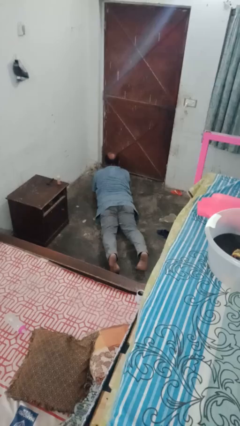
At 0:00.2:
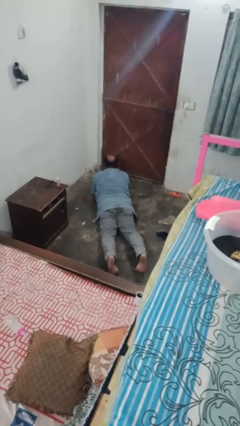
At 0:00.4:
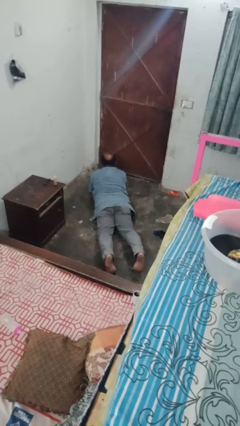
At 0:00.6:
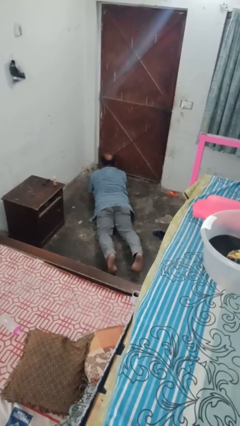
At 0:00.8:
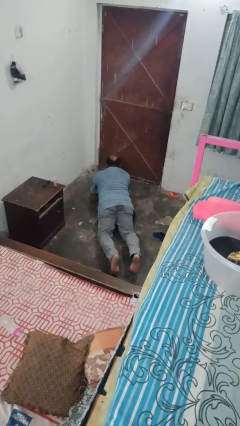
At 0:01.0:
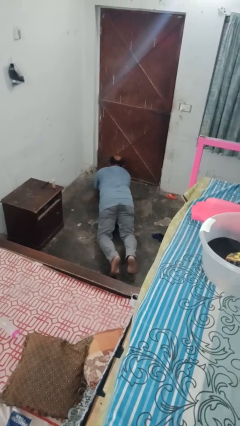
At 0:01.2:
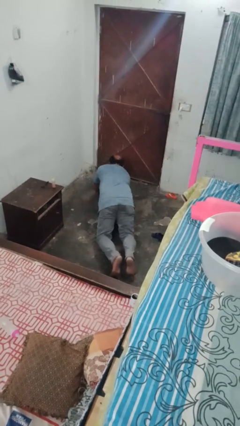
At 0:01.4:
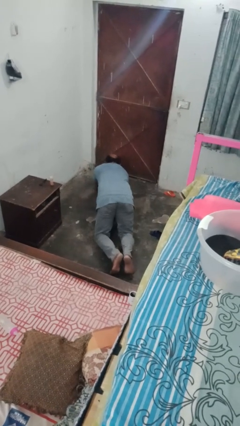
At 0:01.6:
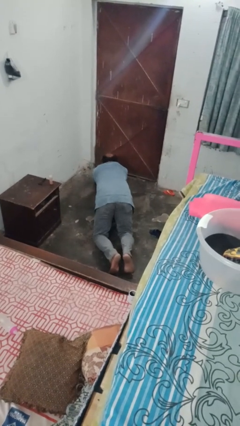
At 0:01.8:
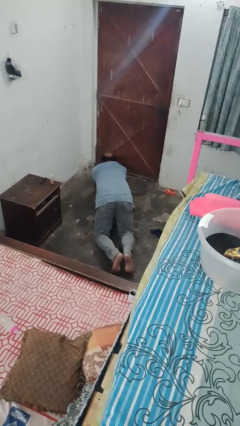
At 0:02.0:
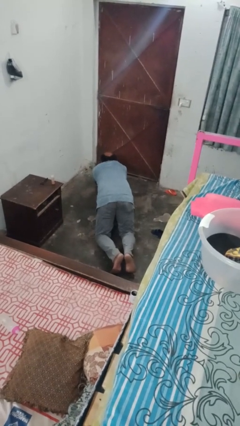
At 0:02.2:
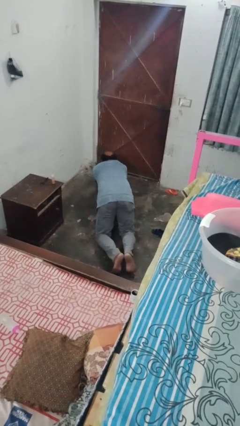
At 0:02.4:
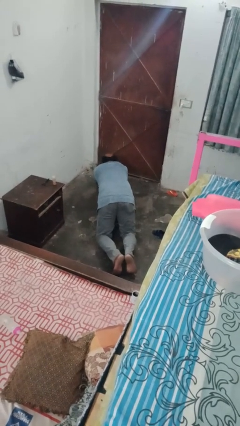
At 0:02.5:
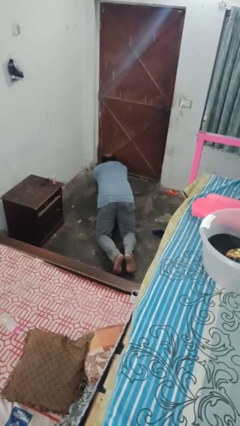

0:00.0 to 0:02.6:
person exercises with plank

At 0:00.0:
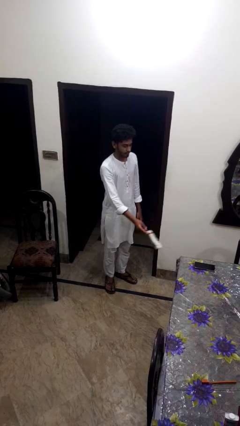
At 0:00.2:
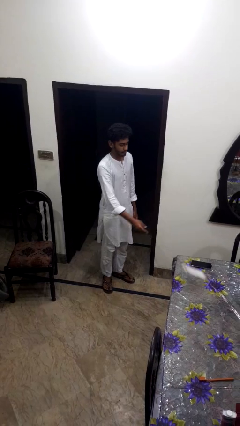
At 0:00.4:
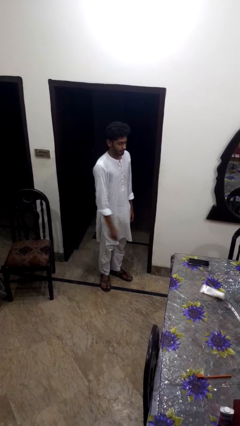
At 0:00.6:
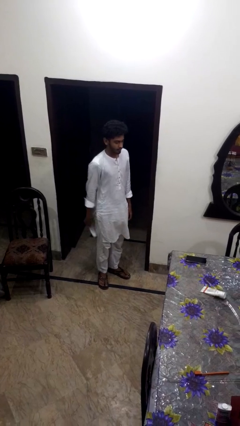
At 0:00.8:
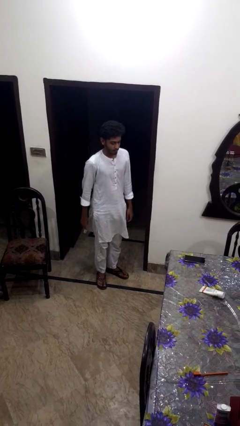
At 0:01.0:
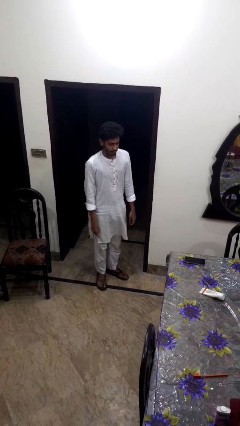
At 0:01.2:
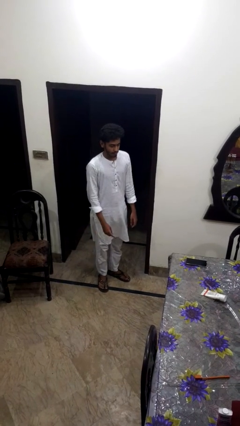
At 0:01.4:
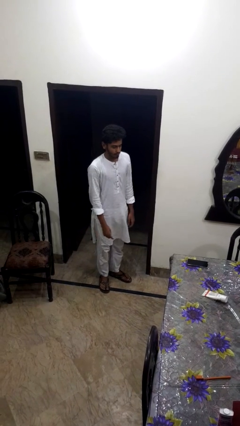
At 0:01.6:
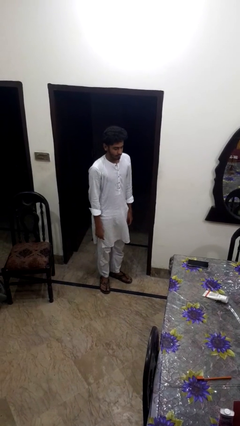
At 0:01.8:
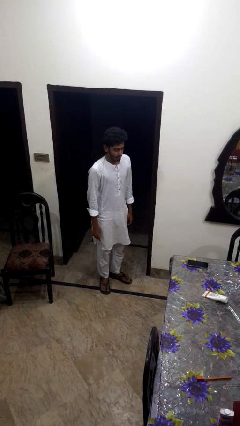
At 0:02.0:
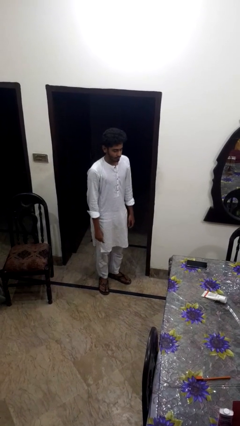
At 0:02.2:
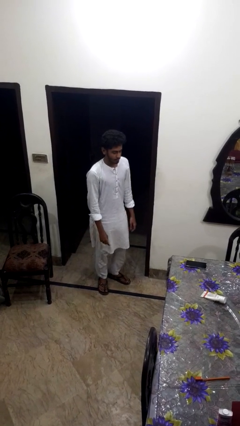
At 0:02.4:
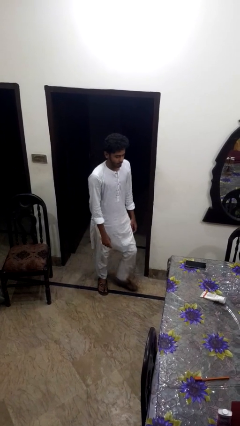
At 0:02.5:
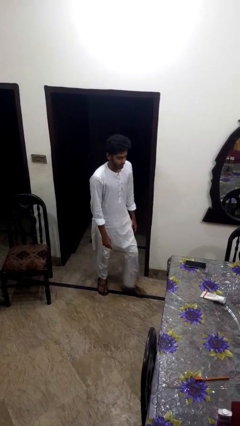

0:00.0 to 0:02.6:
person throws object on table

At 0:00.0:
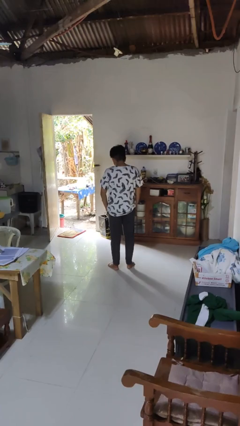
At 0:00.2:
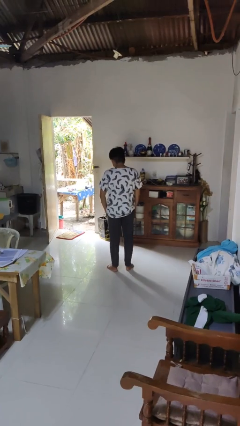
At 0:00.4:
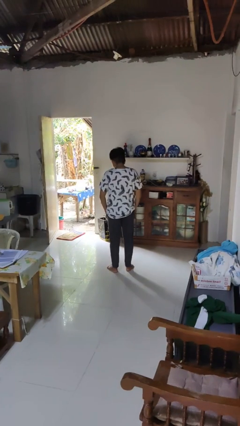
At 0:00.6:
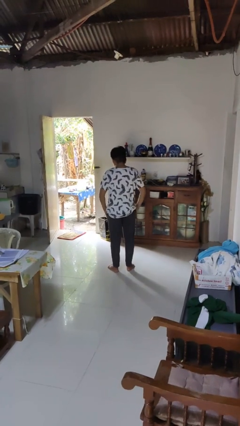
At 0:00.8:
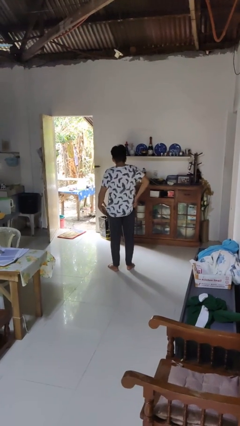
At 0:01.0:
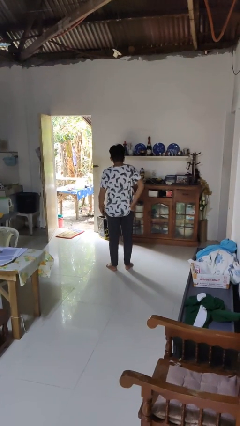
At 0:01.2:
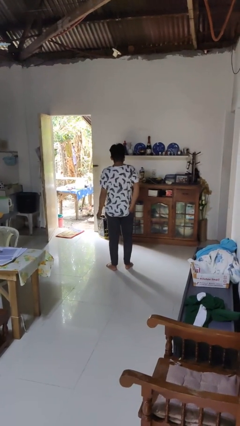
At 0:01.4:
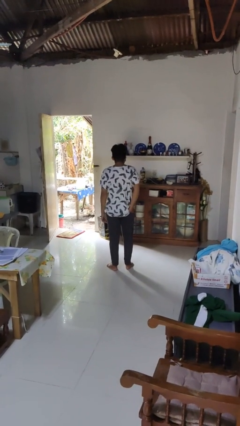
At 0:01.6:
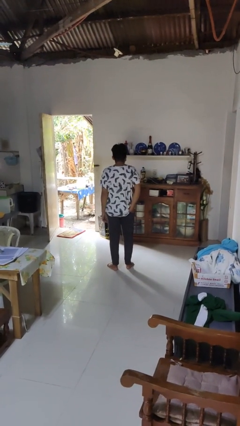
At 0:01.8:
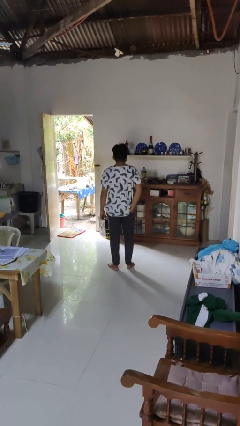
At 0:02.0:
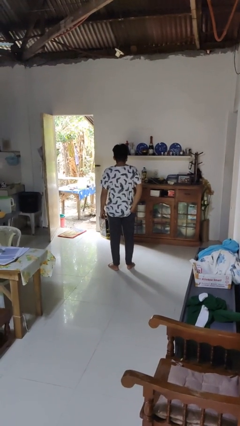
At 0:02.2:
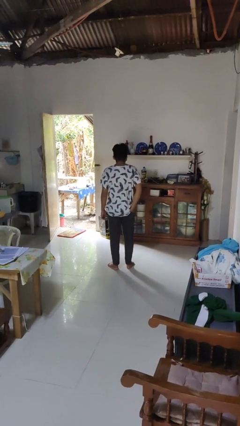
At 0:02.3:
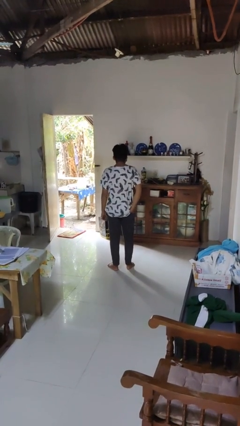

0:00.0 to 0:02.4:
person puts hands in back pockets

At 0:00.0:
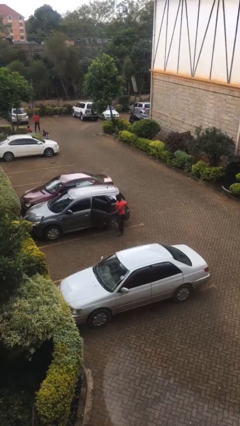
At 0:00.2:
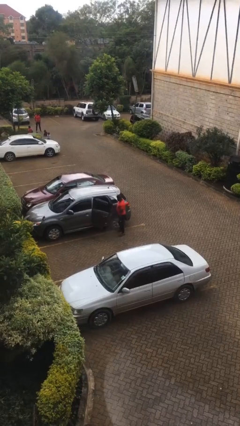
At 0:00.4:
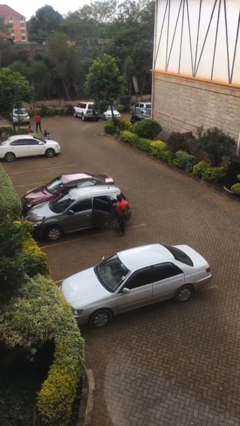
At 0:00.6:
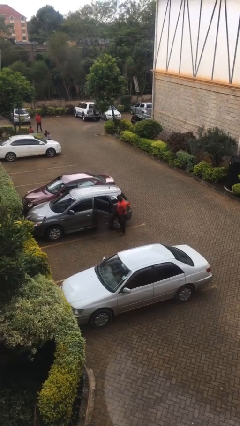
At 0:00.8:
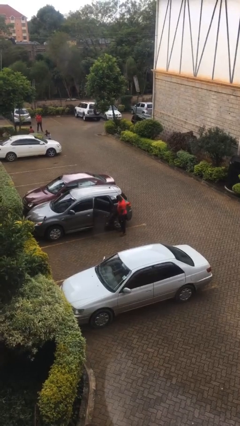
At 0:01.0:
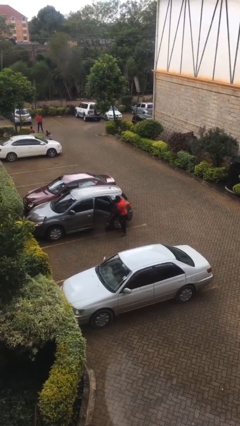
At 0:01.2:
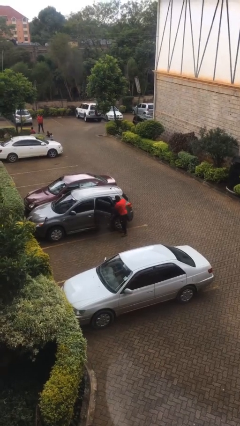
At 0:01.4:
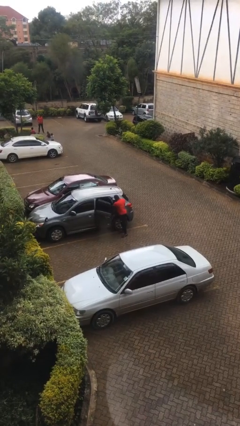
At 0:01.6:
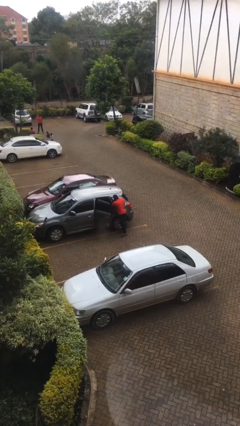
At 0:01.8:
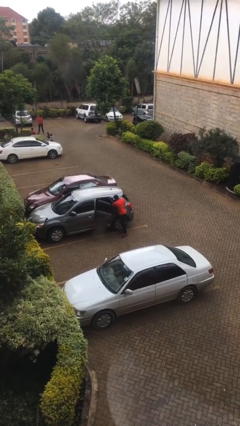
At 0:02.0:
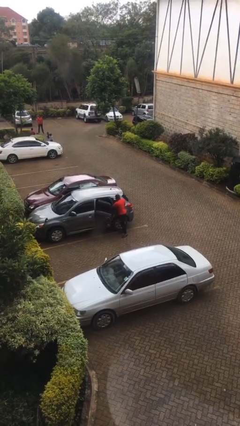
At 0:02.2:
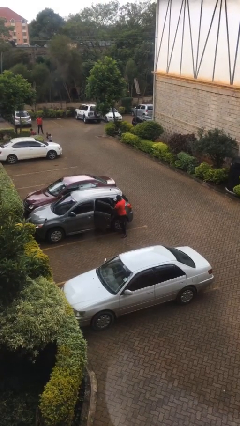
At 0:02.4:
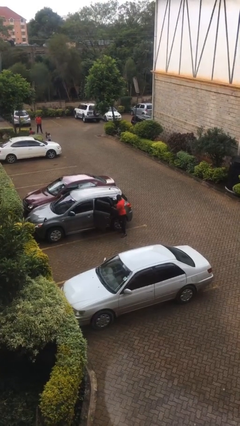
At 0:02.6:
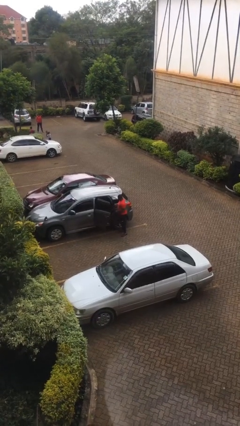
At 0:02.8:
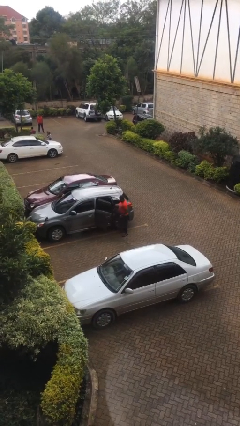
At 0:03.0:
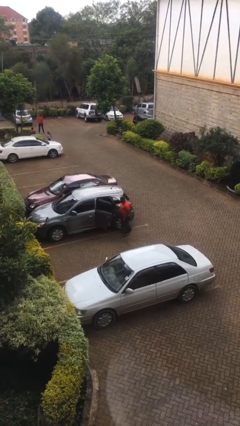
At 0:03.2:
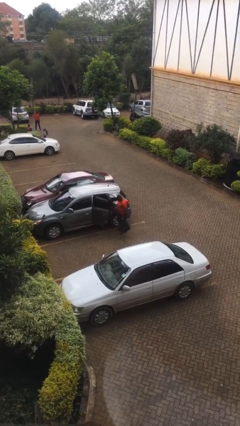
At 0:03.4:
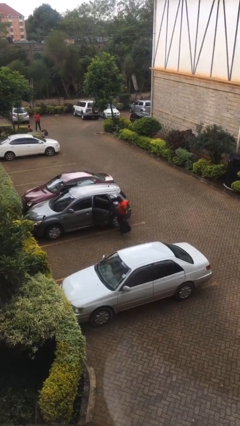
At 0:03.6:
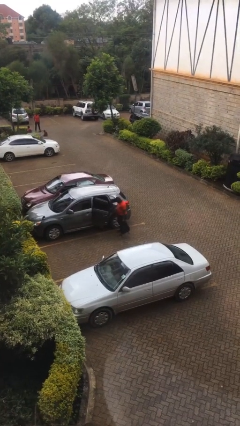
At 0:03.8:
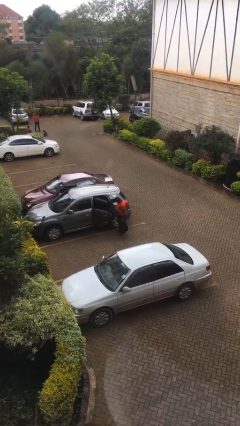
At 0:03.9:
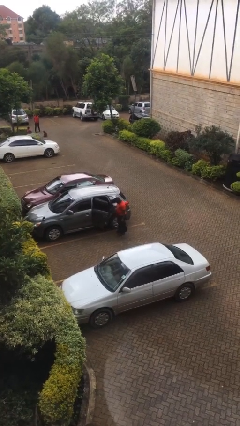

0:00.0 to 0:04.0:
person unloads car

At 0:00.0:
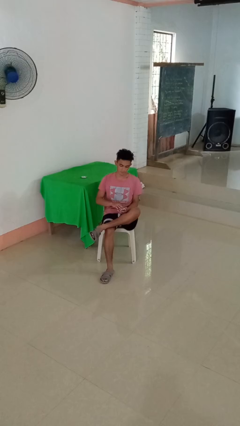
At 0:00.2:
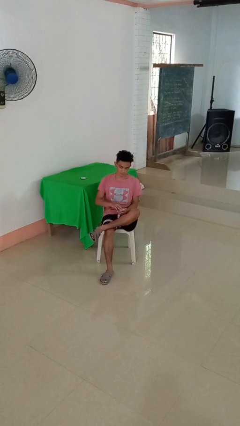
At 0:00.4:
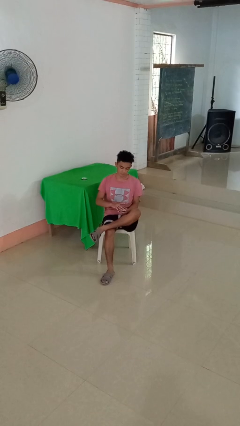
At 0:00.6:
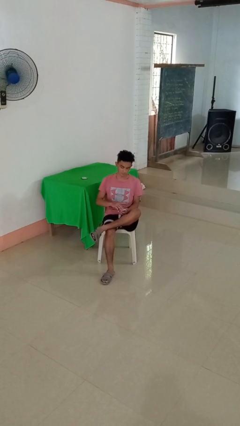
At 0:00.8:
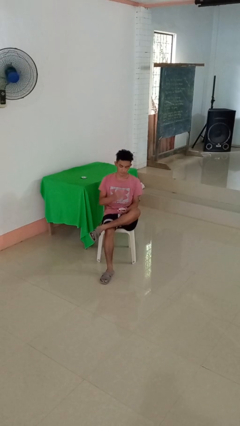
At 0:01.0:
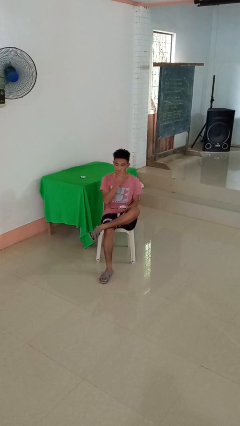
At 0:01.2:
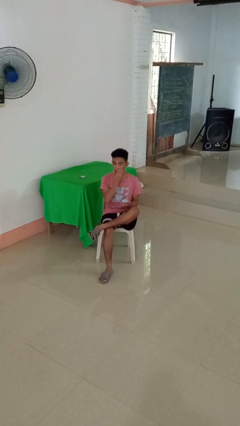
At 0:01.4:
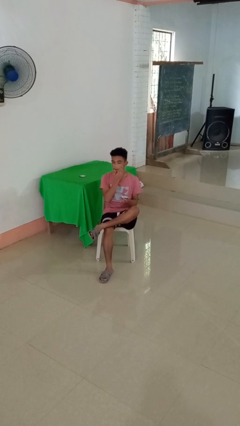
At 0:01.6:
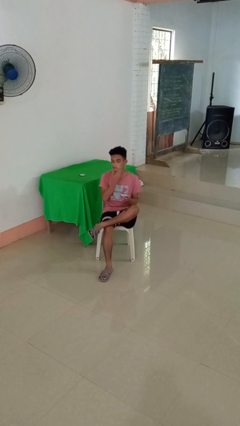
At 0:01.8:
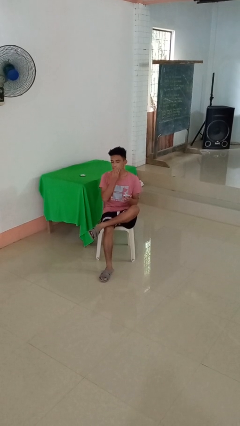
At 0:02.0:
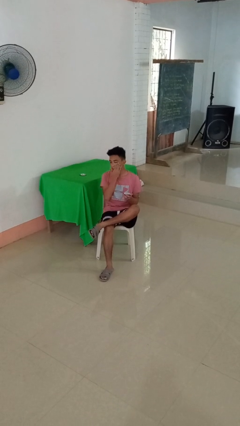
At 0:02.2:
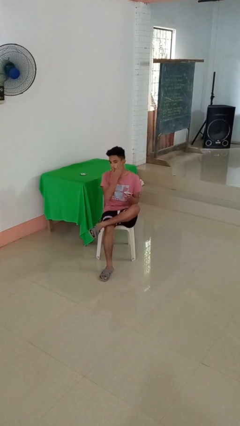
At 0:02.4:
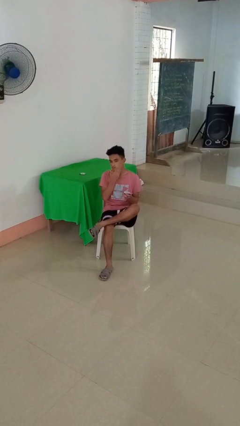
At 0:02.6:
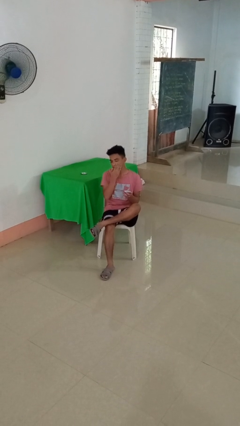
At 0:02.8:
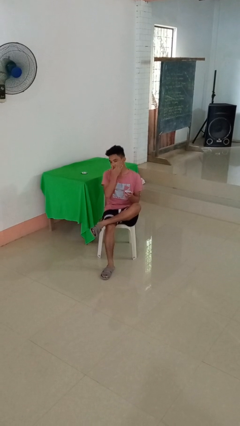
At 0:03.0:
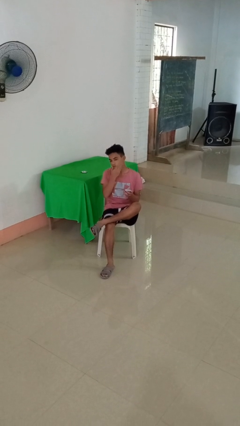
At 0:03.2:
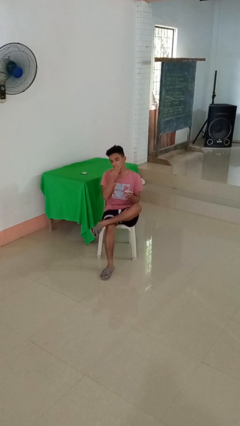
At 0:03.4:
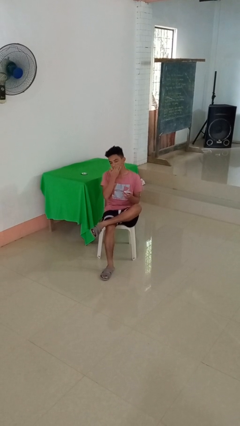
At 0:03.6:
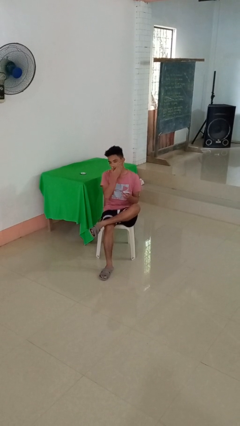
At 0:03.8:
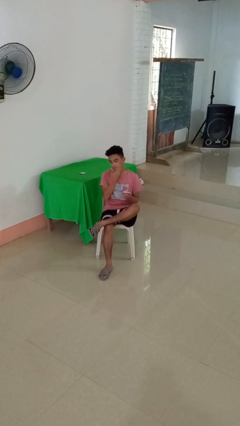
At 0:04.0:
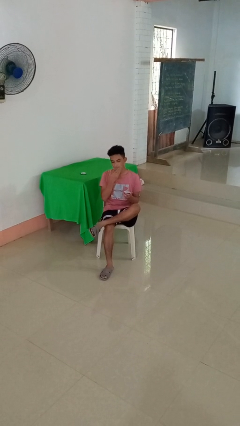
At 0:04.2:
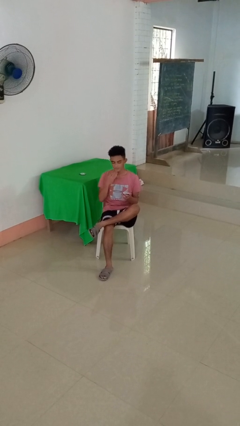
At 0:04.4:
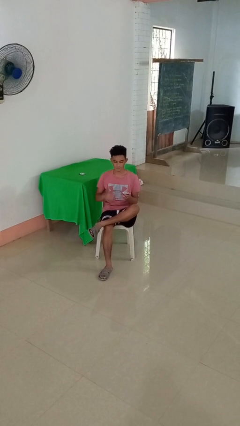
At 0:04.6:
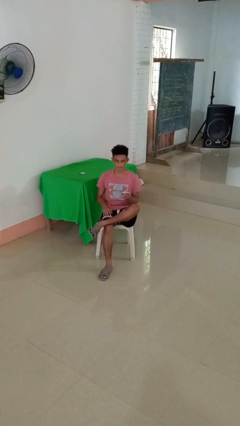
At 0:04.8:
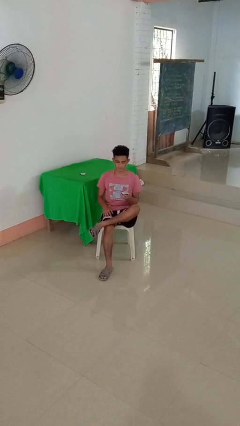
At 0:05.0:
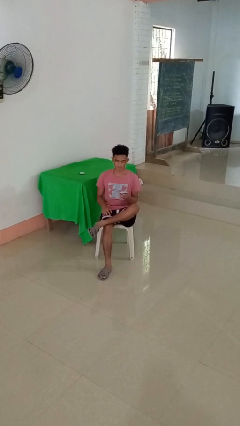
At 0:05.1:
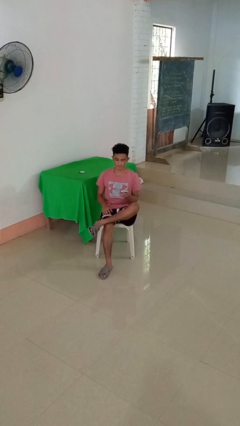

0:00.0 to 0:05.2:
person applies facial moisturizer

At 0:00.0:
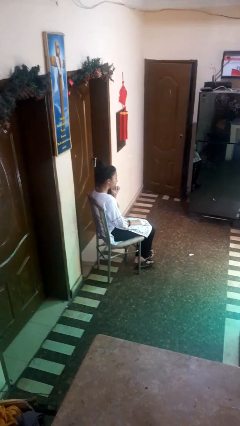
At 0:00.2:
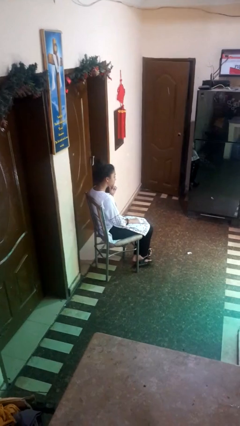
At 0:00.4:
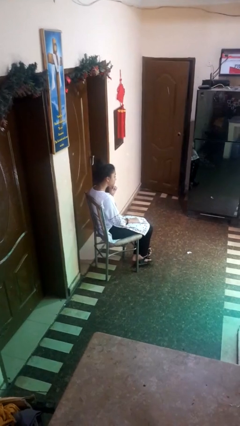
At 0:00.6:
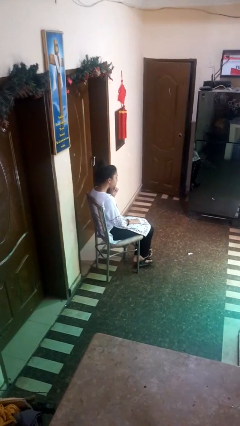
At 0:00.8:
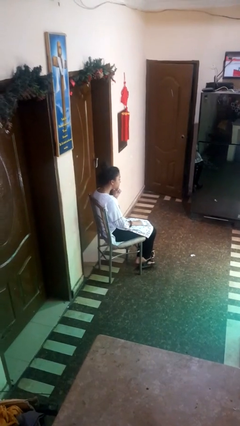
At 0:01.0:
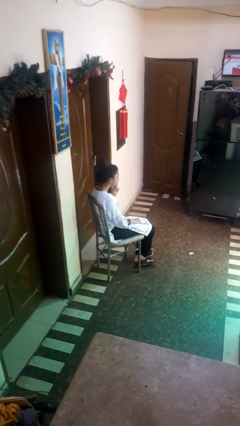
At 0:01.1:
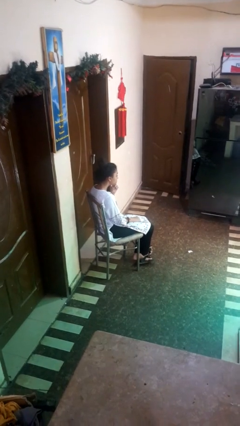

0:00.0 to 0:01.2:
person strokes chin
